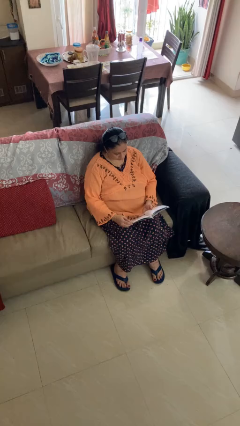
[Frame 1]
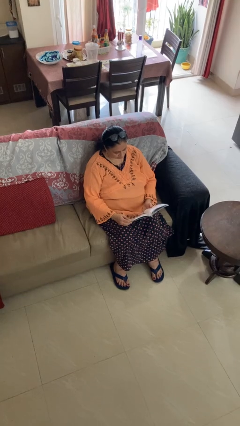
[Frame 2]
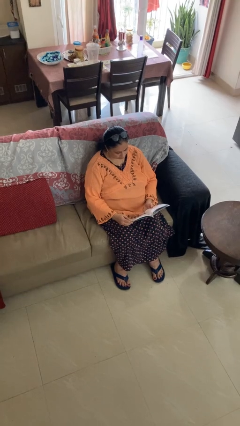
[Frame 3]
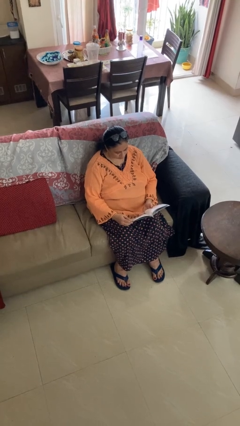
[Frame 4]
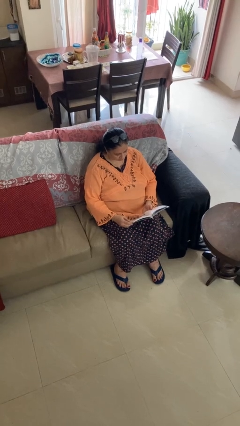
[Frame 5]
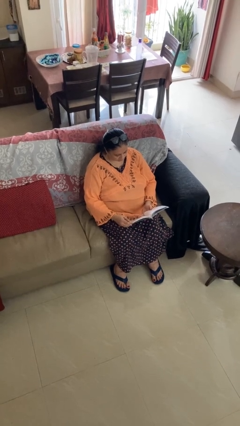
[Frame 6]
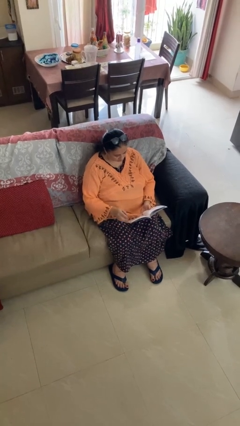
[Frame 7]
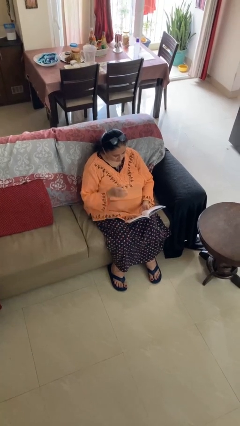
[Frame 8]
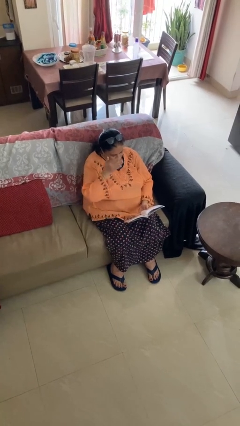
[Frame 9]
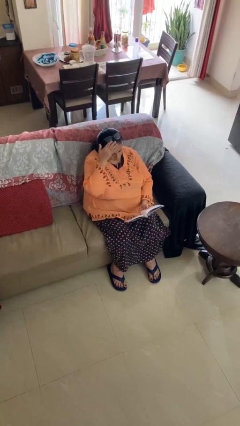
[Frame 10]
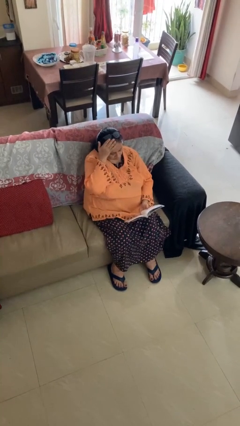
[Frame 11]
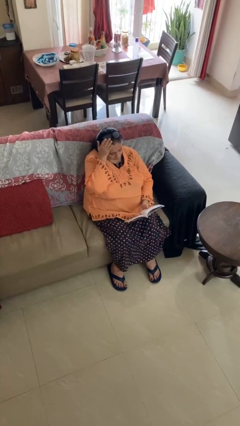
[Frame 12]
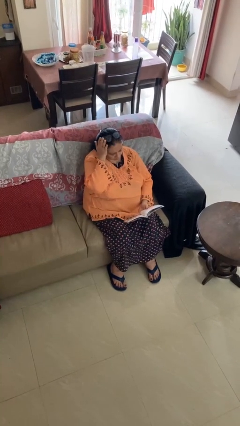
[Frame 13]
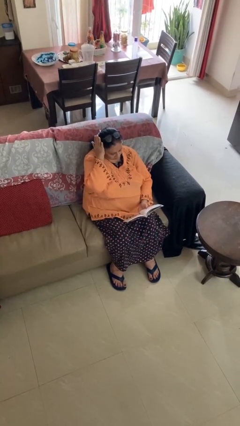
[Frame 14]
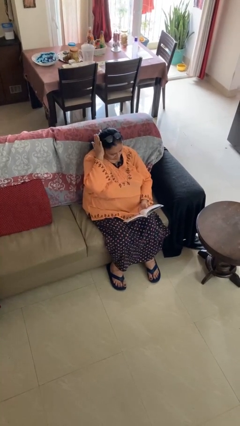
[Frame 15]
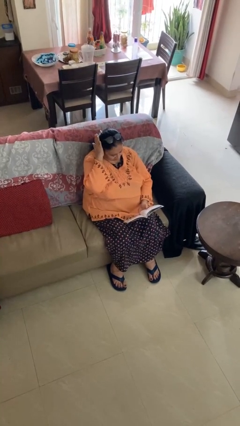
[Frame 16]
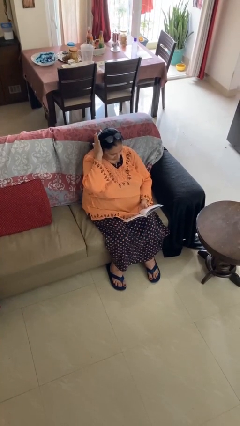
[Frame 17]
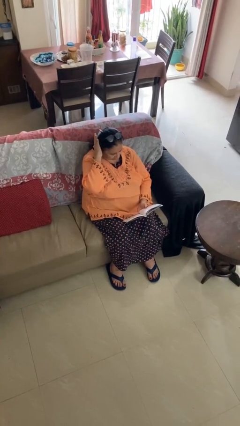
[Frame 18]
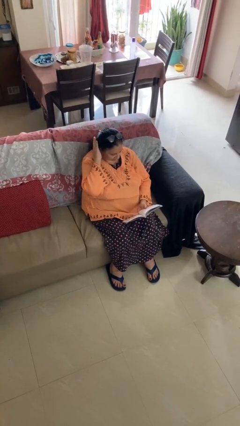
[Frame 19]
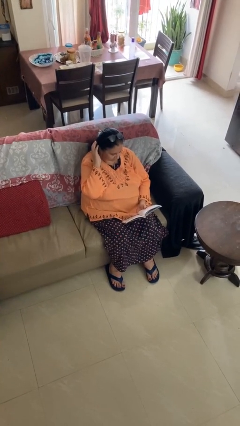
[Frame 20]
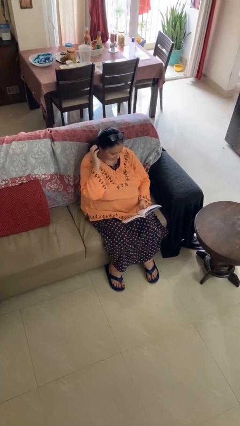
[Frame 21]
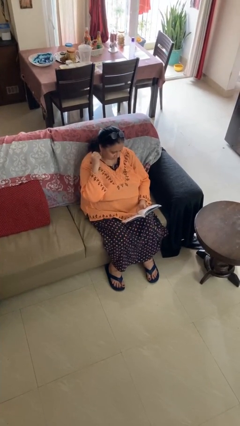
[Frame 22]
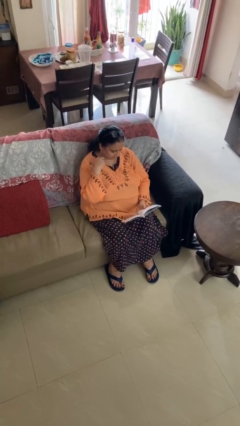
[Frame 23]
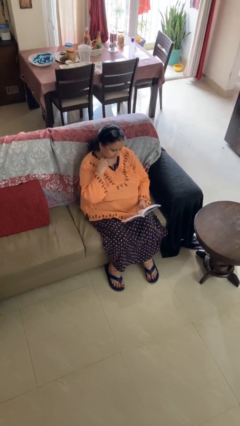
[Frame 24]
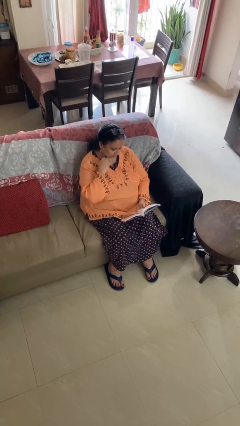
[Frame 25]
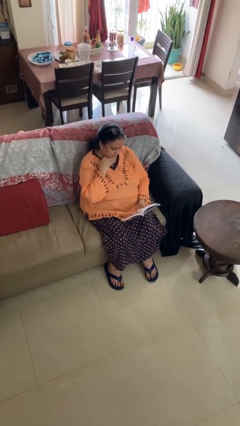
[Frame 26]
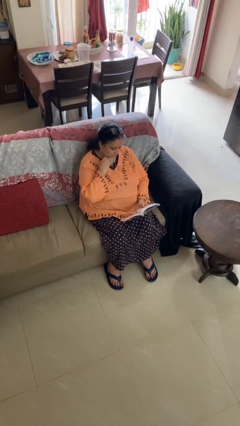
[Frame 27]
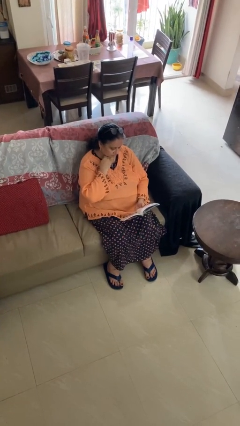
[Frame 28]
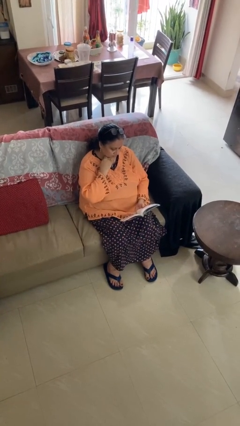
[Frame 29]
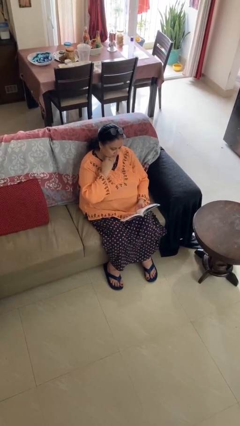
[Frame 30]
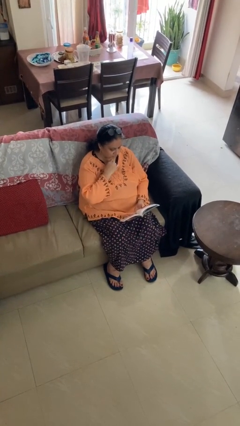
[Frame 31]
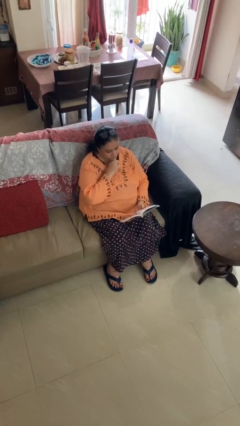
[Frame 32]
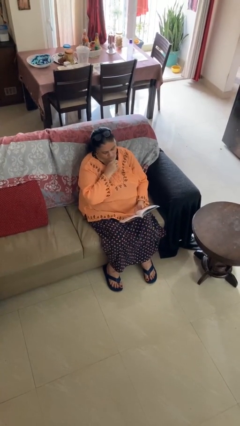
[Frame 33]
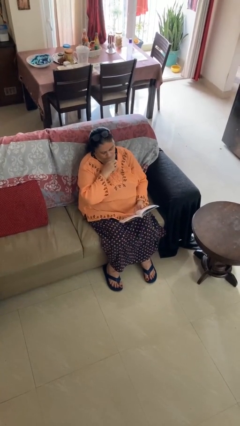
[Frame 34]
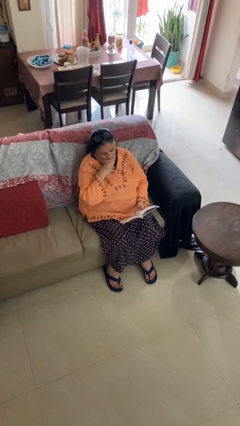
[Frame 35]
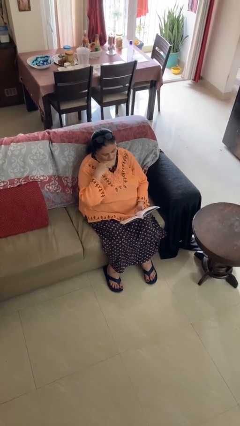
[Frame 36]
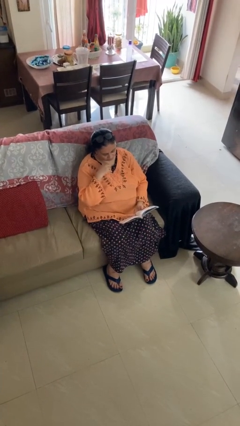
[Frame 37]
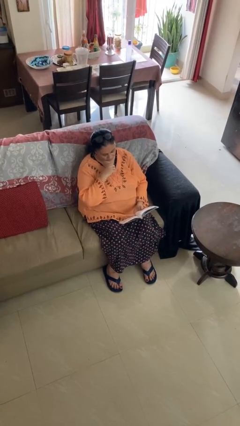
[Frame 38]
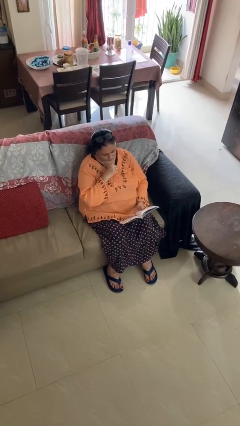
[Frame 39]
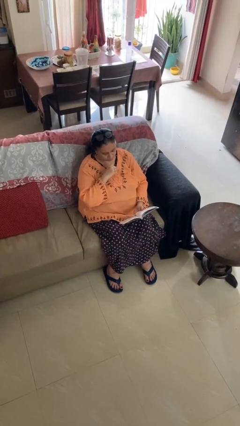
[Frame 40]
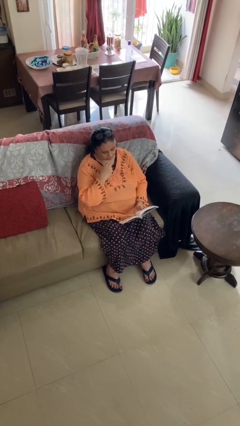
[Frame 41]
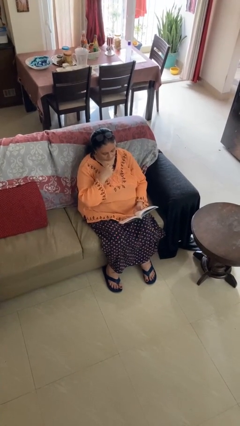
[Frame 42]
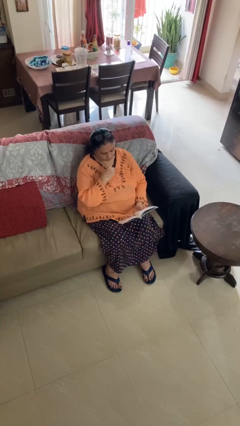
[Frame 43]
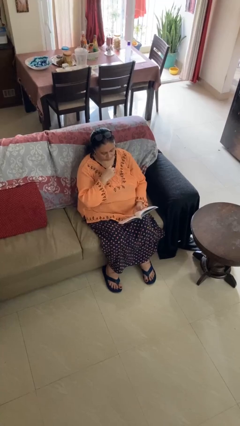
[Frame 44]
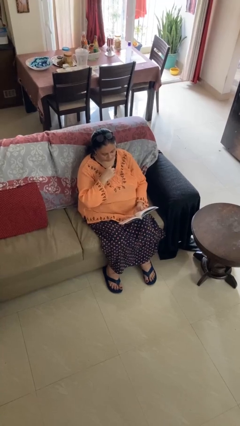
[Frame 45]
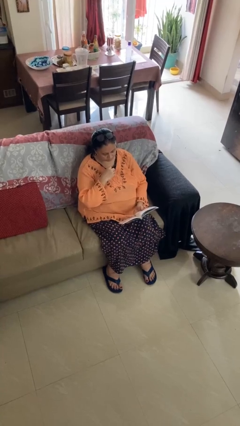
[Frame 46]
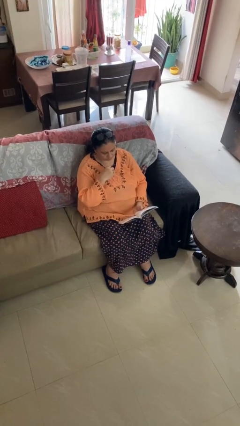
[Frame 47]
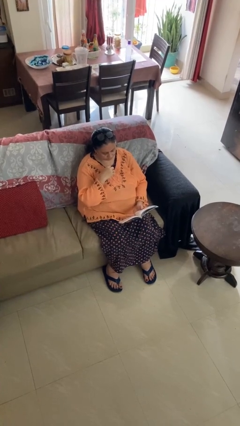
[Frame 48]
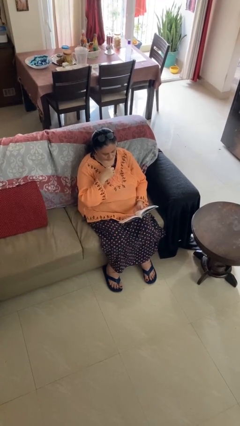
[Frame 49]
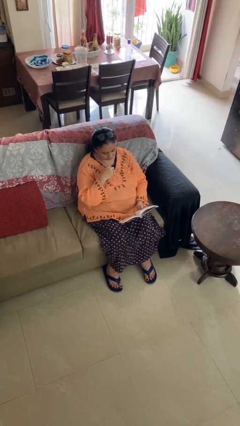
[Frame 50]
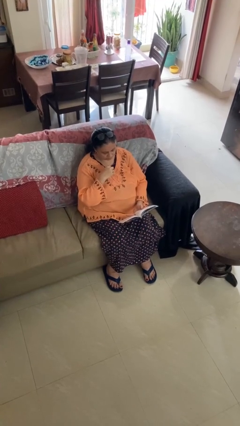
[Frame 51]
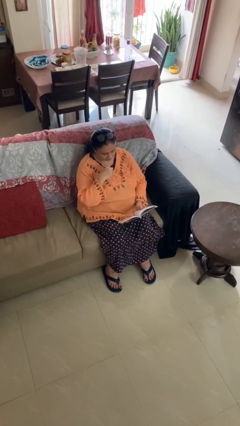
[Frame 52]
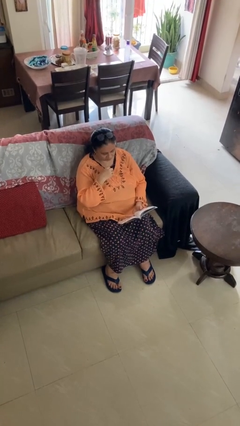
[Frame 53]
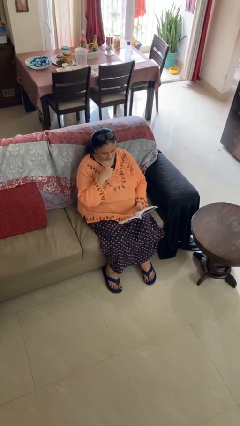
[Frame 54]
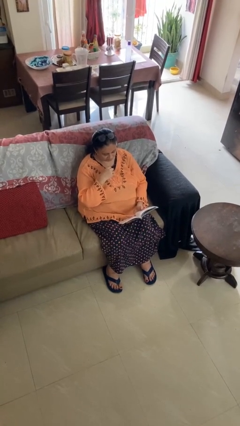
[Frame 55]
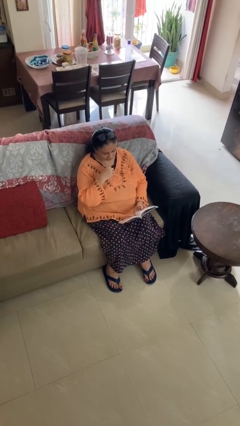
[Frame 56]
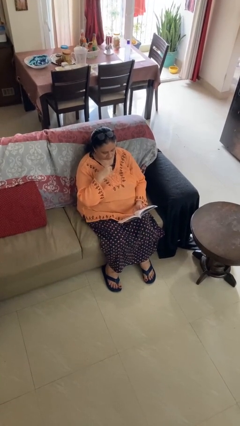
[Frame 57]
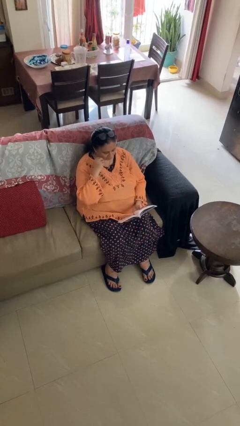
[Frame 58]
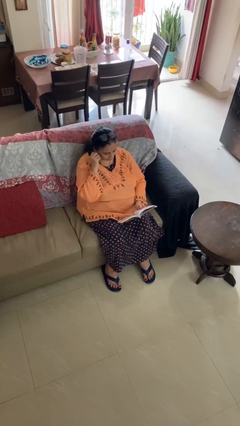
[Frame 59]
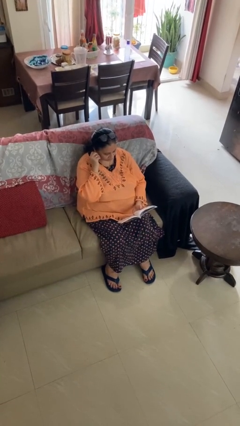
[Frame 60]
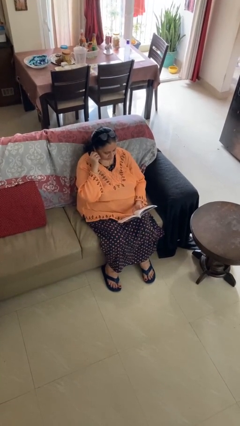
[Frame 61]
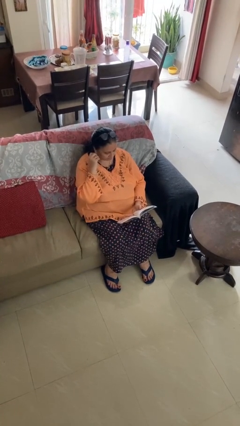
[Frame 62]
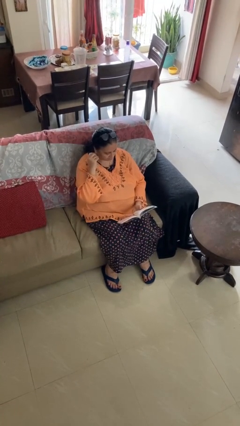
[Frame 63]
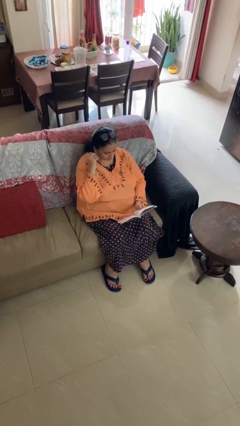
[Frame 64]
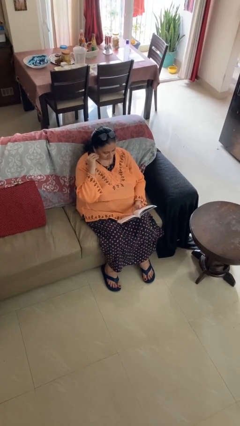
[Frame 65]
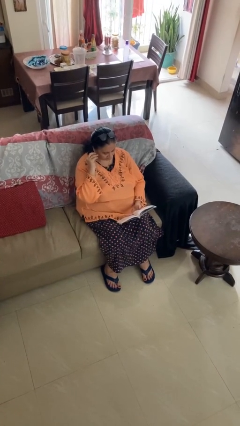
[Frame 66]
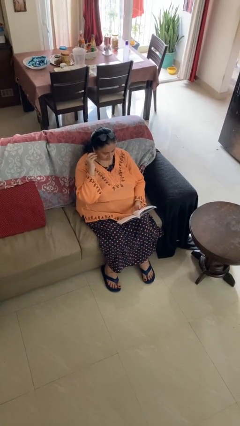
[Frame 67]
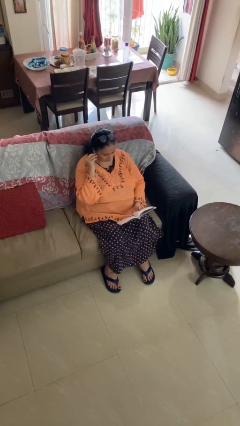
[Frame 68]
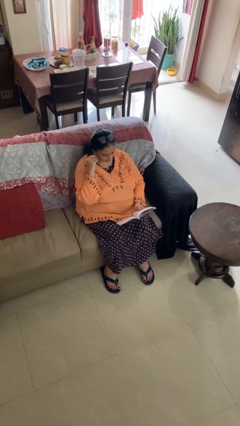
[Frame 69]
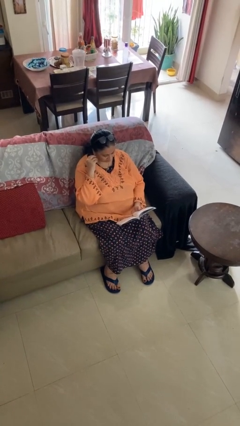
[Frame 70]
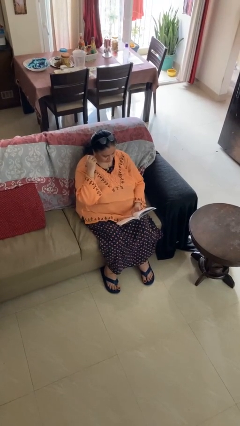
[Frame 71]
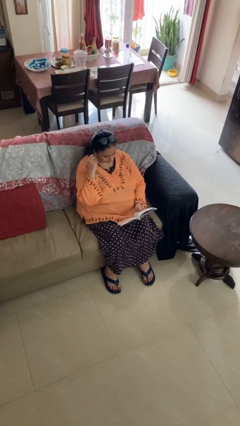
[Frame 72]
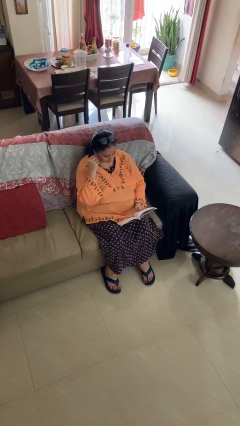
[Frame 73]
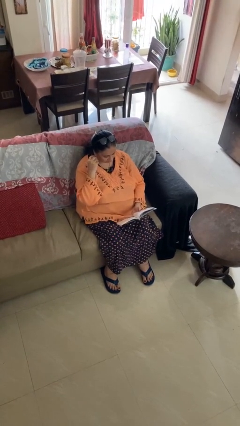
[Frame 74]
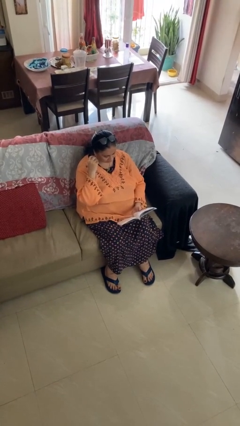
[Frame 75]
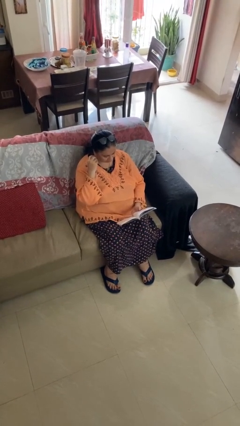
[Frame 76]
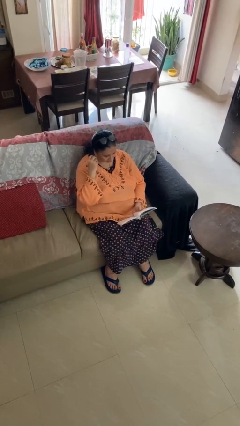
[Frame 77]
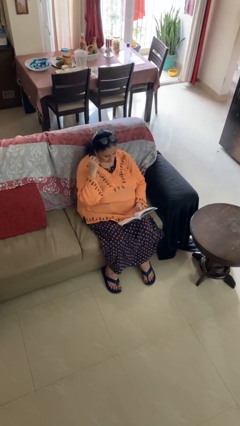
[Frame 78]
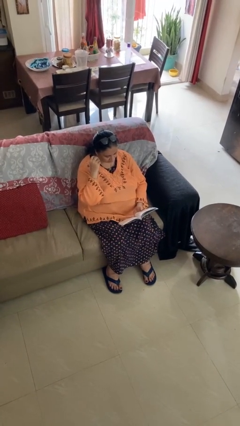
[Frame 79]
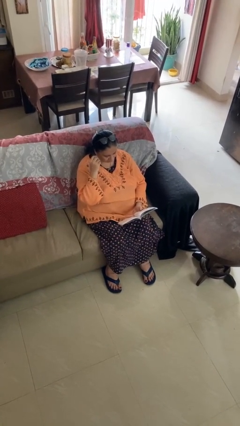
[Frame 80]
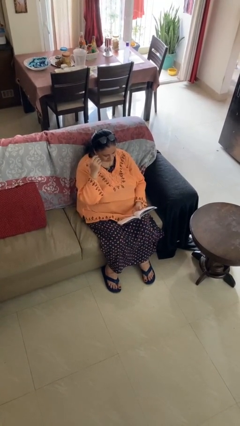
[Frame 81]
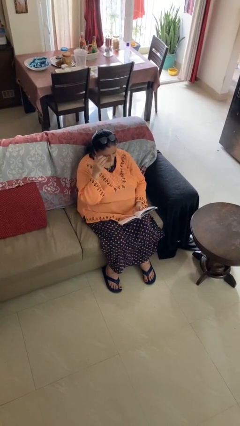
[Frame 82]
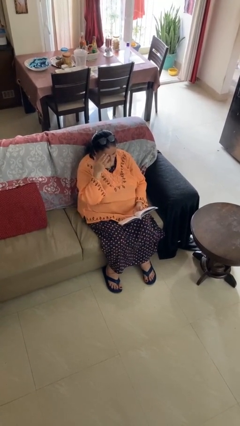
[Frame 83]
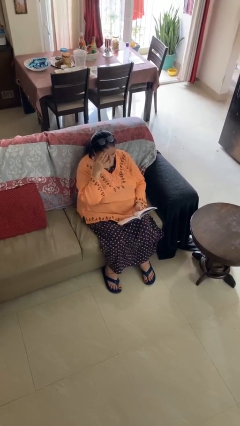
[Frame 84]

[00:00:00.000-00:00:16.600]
person reads document

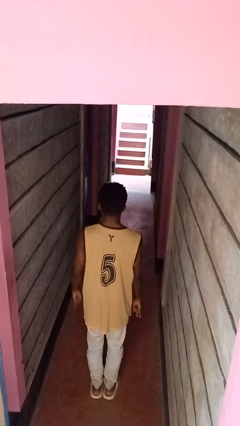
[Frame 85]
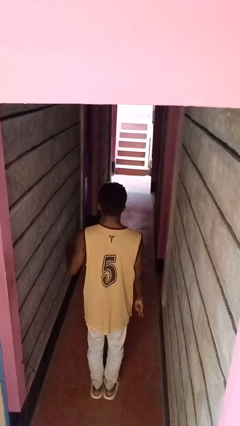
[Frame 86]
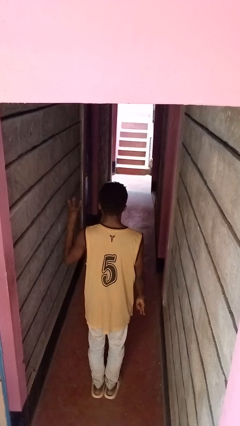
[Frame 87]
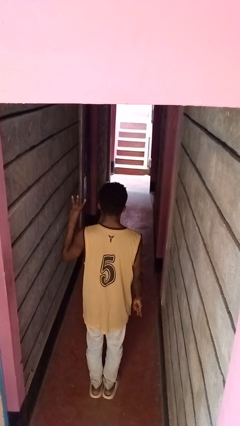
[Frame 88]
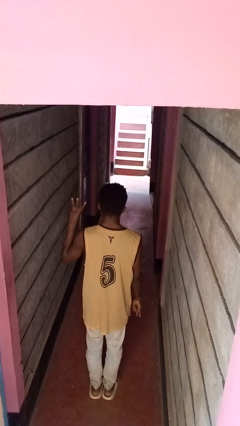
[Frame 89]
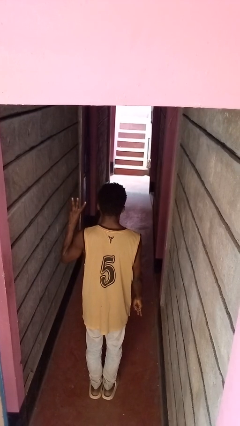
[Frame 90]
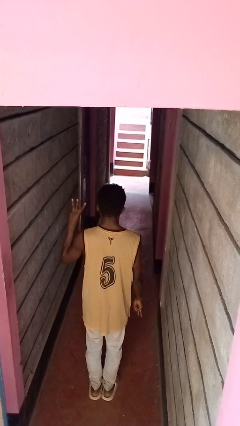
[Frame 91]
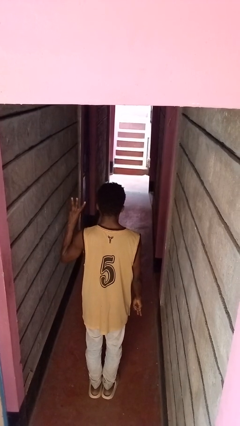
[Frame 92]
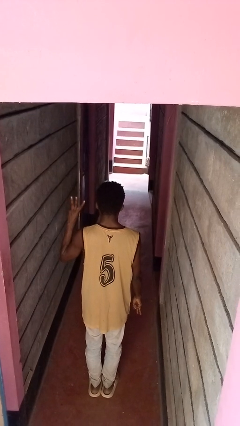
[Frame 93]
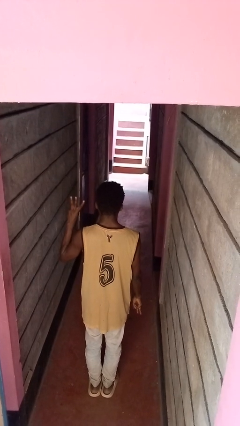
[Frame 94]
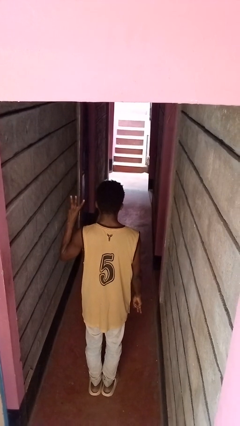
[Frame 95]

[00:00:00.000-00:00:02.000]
person gestures number three
